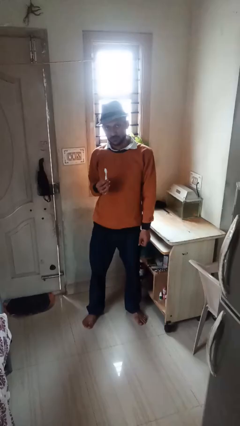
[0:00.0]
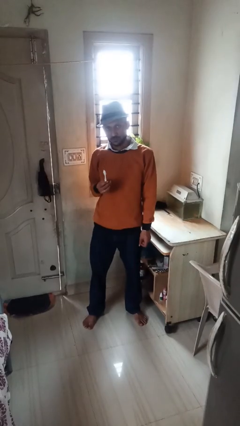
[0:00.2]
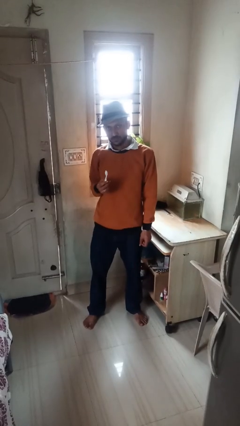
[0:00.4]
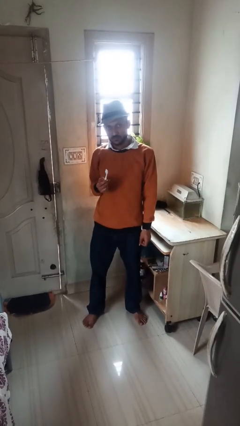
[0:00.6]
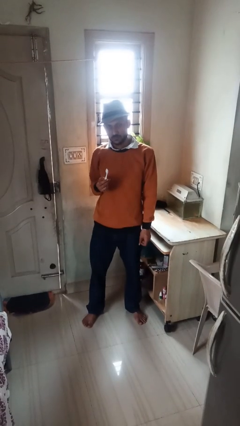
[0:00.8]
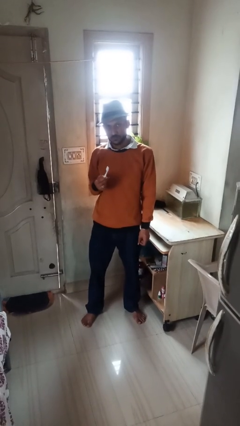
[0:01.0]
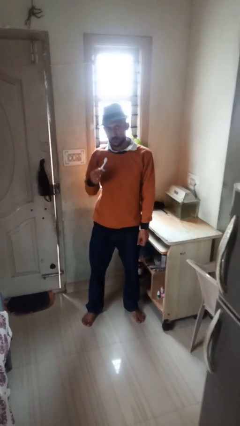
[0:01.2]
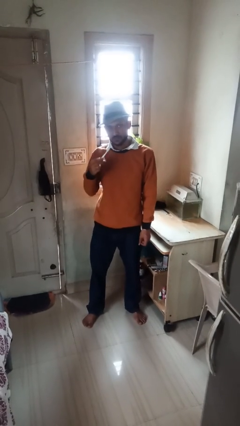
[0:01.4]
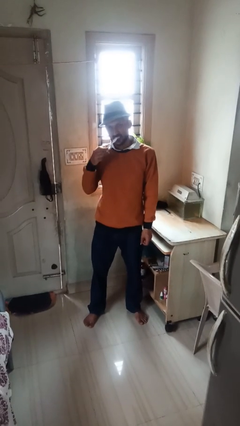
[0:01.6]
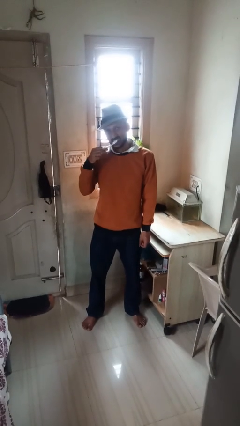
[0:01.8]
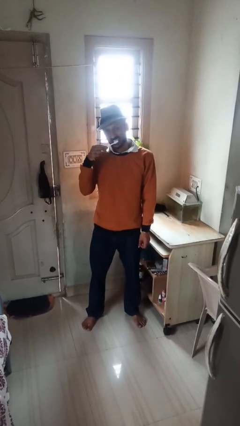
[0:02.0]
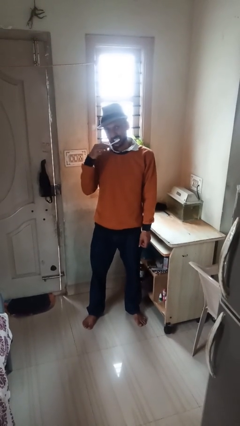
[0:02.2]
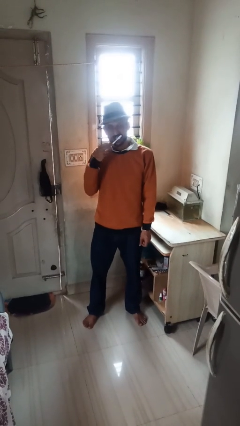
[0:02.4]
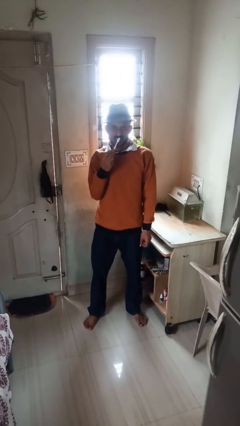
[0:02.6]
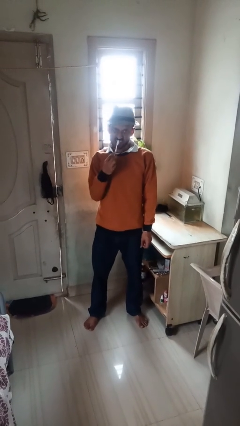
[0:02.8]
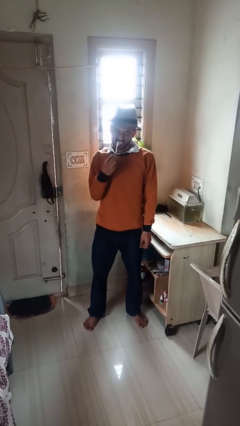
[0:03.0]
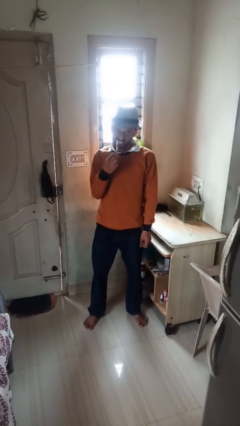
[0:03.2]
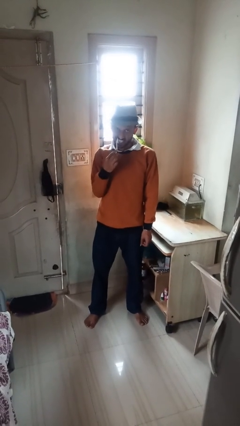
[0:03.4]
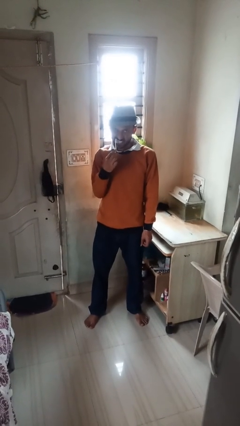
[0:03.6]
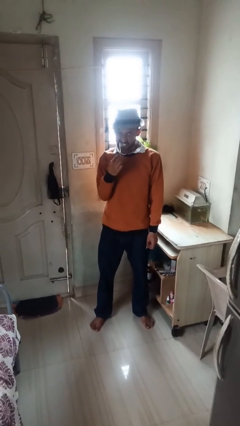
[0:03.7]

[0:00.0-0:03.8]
person brushes teeth

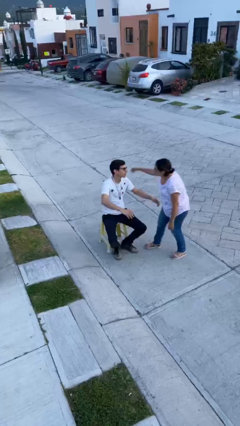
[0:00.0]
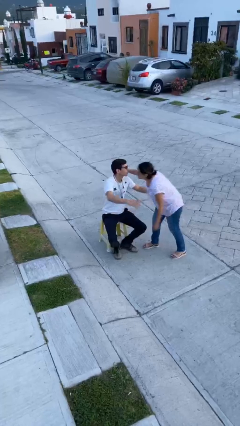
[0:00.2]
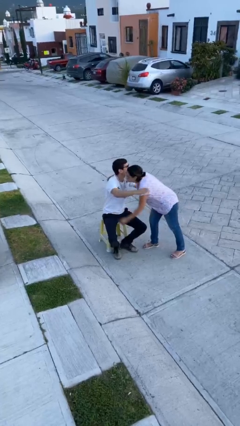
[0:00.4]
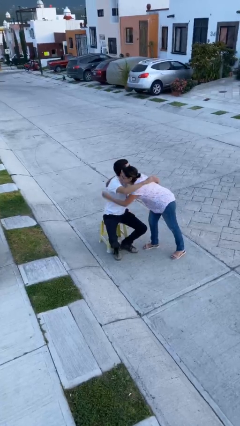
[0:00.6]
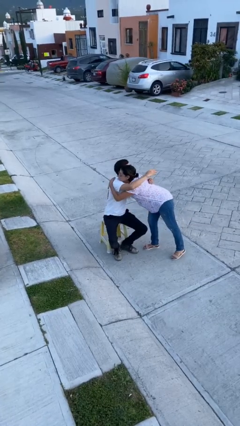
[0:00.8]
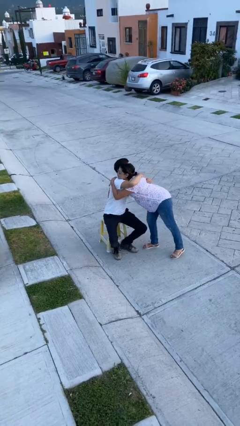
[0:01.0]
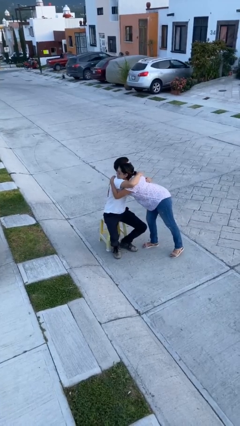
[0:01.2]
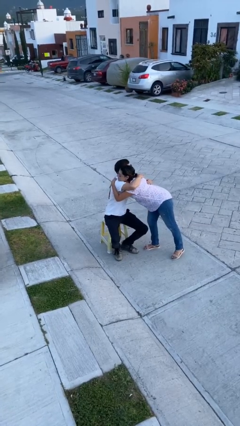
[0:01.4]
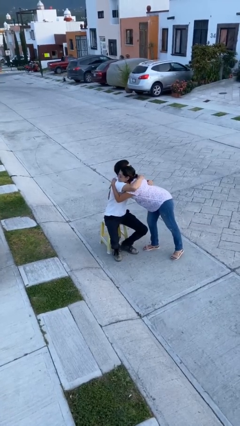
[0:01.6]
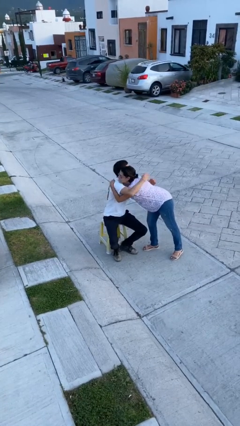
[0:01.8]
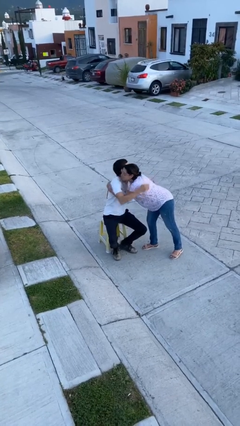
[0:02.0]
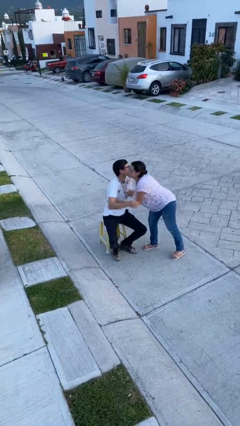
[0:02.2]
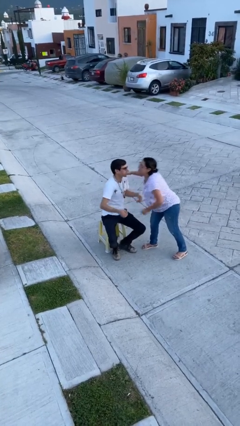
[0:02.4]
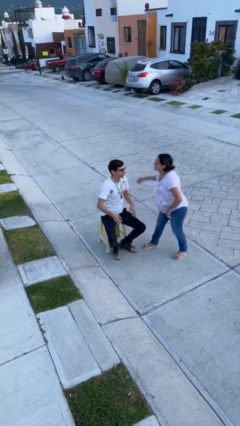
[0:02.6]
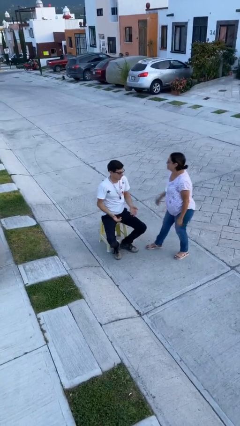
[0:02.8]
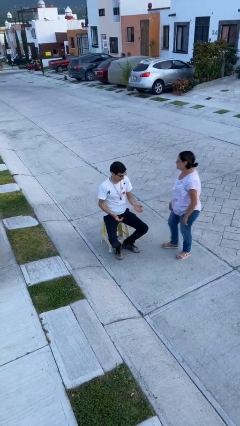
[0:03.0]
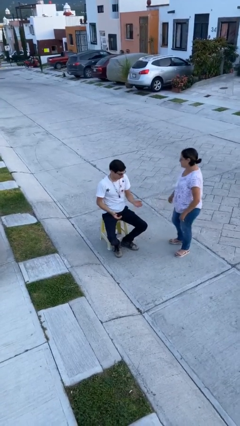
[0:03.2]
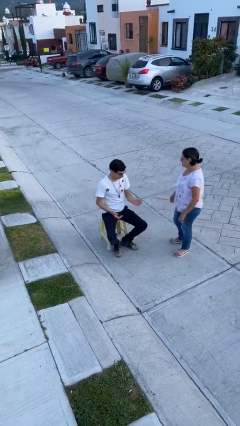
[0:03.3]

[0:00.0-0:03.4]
person embraces person

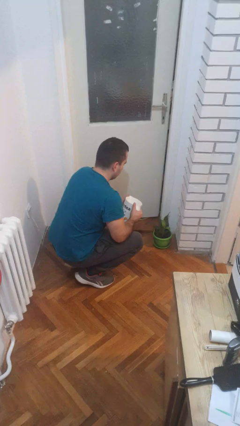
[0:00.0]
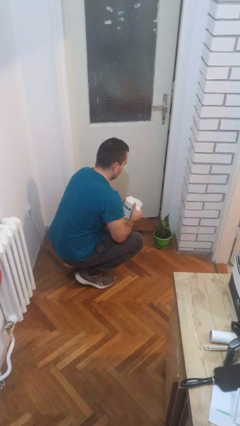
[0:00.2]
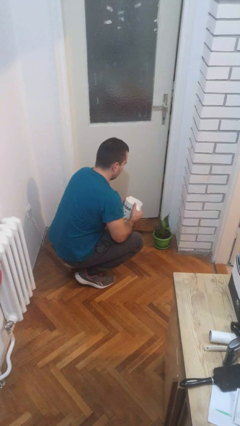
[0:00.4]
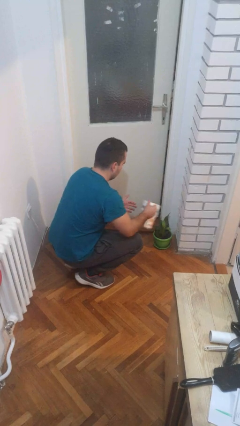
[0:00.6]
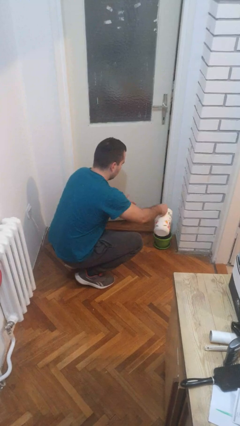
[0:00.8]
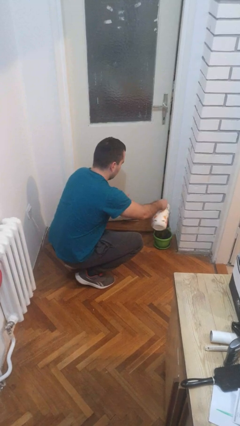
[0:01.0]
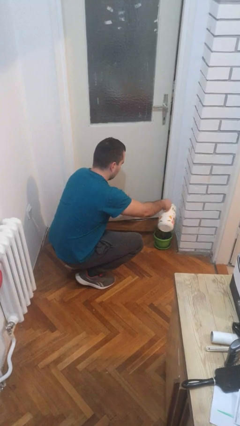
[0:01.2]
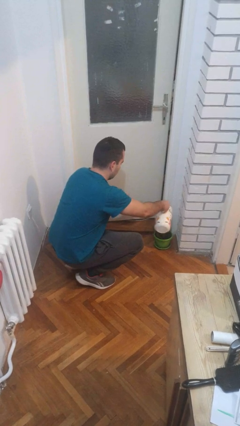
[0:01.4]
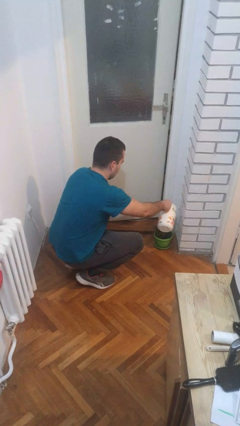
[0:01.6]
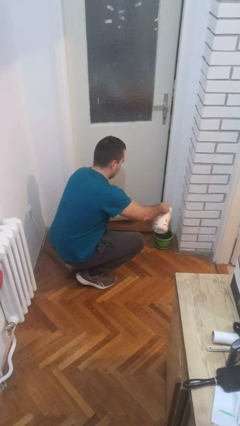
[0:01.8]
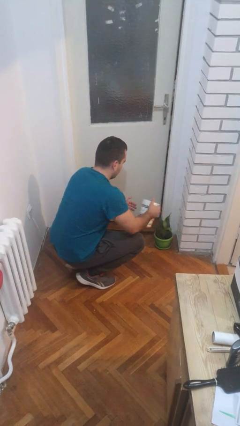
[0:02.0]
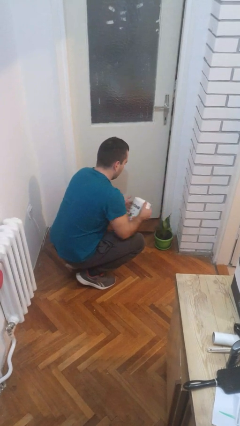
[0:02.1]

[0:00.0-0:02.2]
person waters houseplant

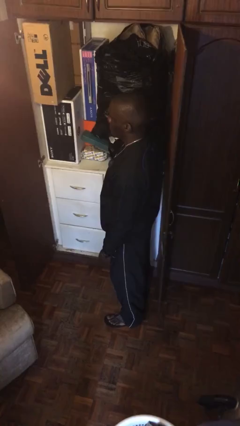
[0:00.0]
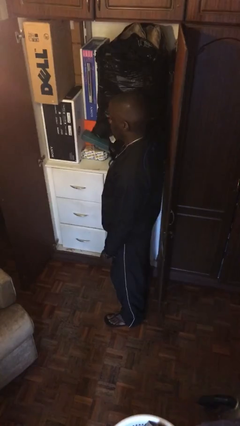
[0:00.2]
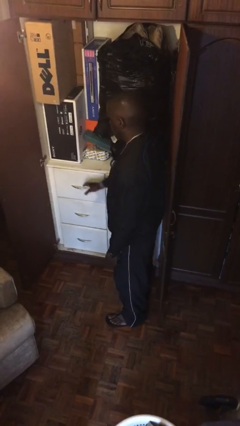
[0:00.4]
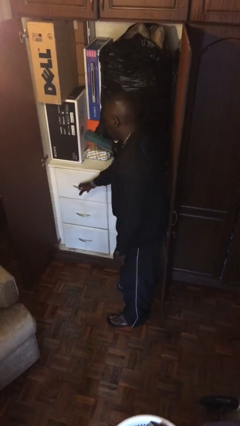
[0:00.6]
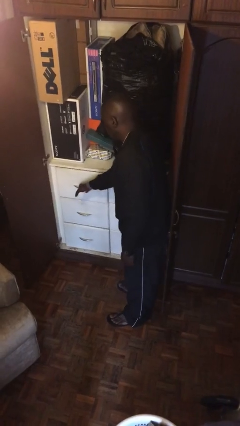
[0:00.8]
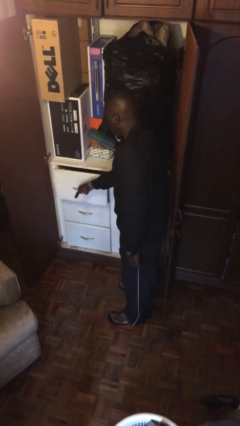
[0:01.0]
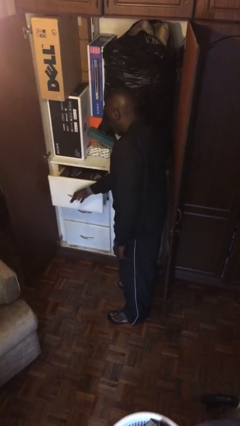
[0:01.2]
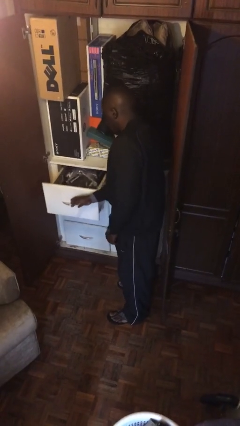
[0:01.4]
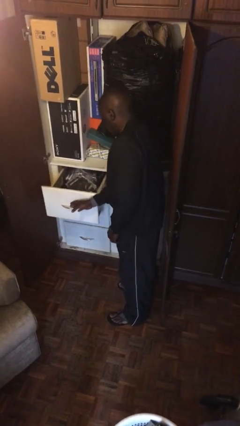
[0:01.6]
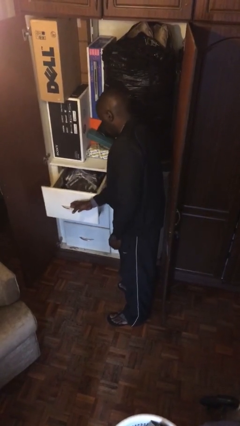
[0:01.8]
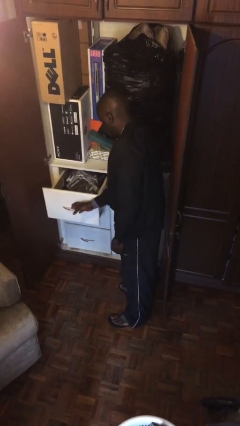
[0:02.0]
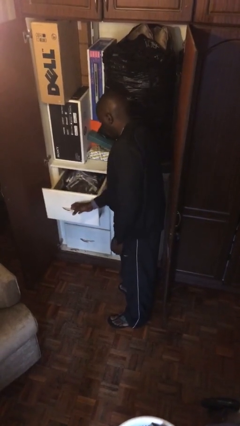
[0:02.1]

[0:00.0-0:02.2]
person opens dresser drawer

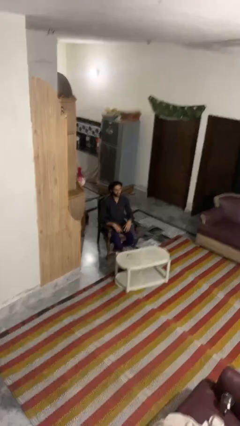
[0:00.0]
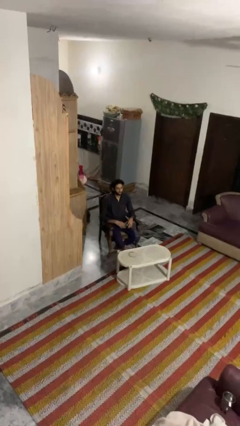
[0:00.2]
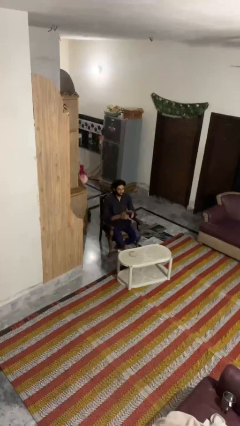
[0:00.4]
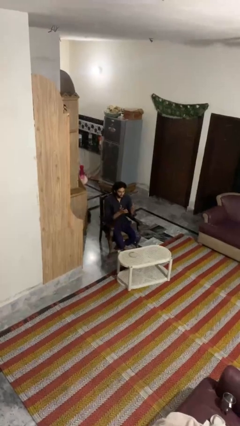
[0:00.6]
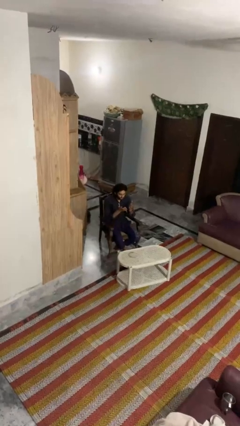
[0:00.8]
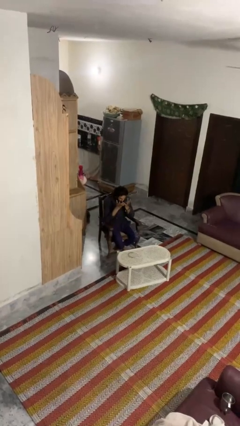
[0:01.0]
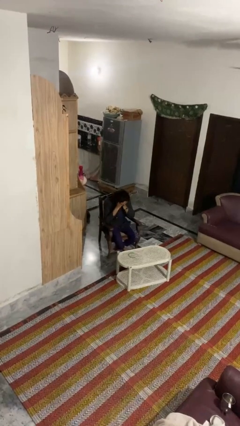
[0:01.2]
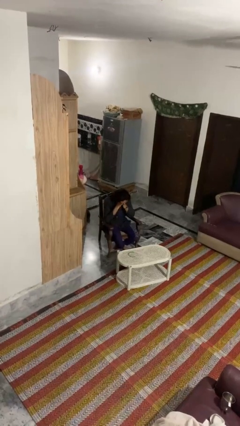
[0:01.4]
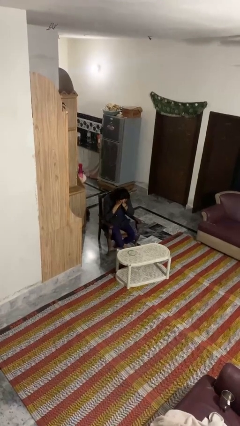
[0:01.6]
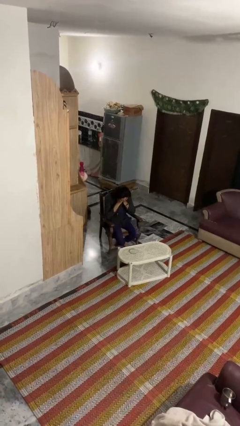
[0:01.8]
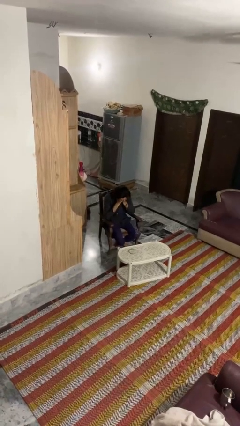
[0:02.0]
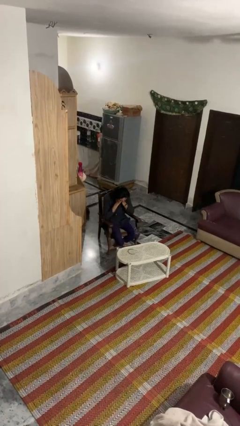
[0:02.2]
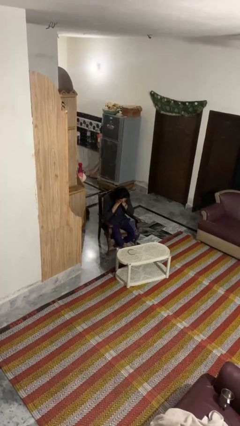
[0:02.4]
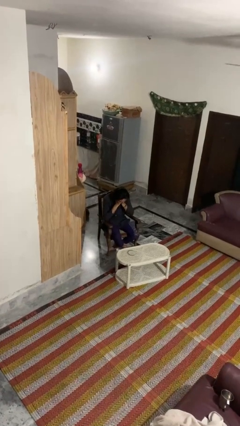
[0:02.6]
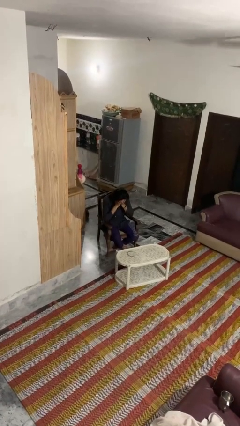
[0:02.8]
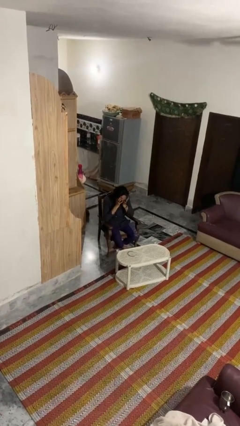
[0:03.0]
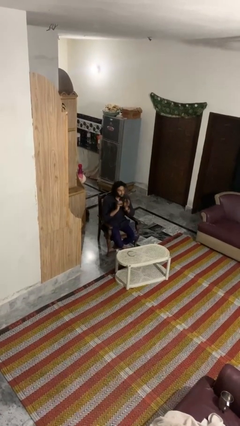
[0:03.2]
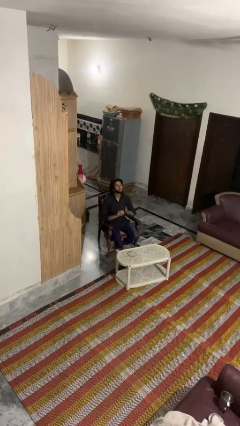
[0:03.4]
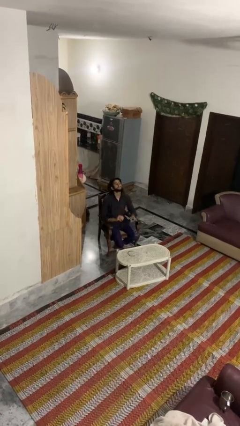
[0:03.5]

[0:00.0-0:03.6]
person covers face with hands

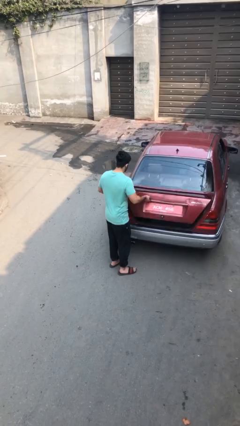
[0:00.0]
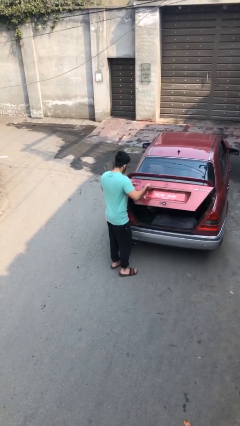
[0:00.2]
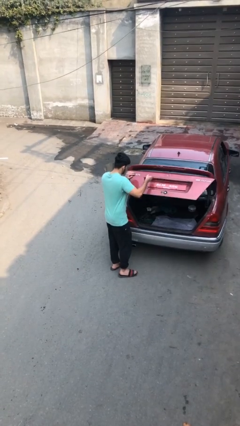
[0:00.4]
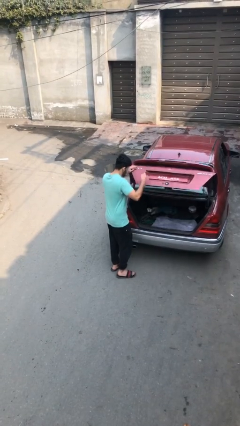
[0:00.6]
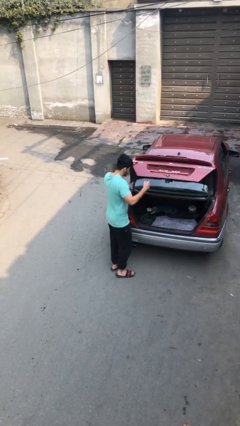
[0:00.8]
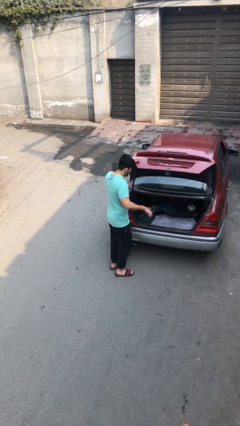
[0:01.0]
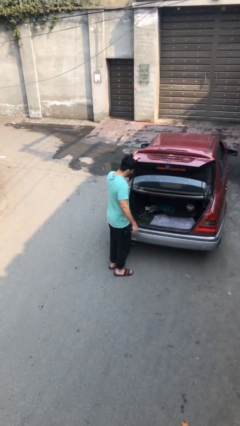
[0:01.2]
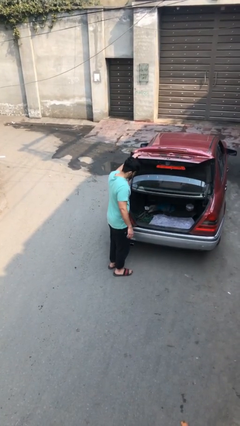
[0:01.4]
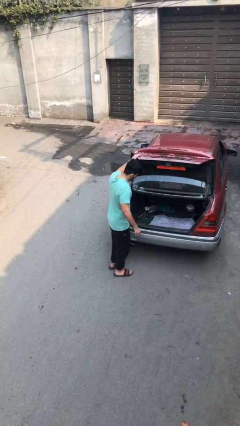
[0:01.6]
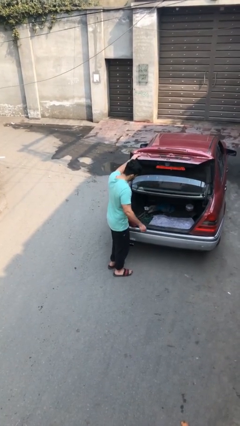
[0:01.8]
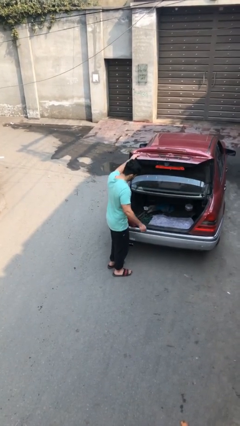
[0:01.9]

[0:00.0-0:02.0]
person opens car trunk
